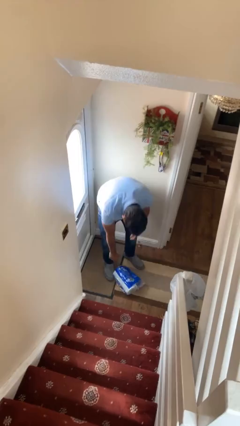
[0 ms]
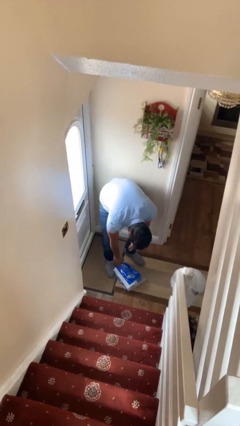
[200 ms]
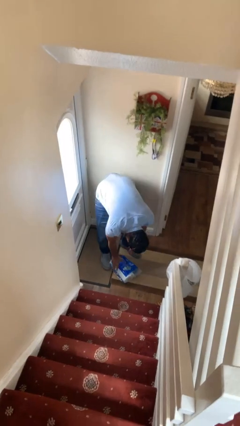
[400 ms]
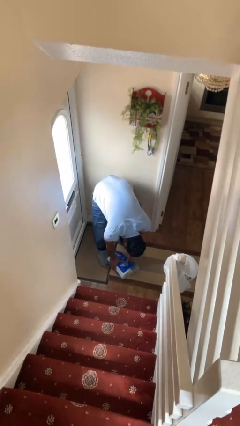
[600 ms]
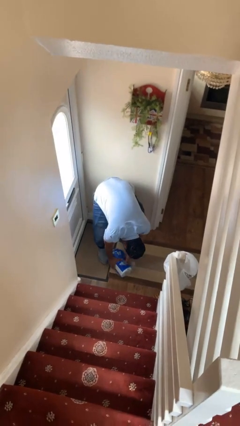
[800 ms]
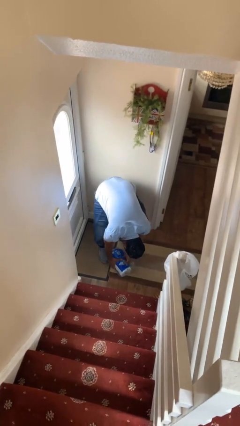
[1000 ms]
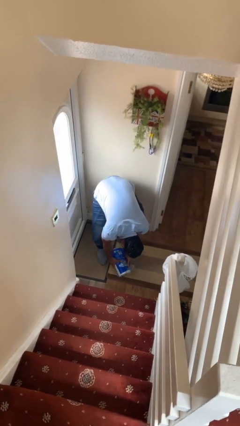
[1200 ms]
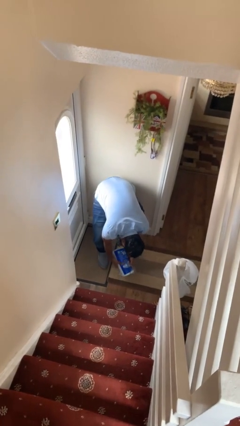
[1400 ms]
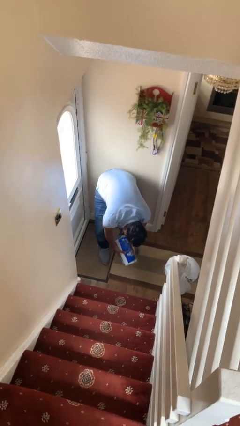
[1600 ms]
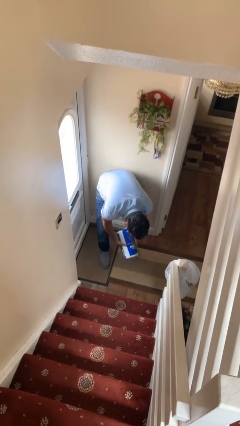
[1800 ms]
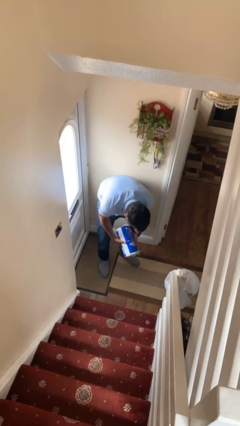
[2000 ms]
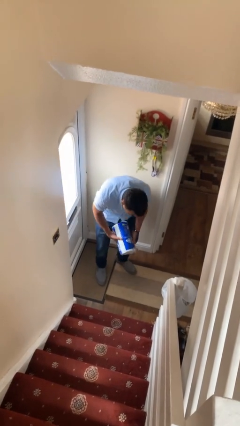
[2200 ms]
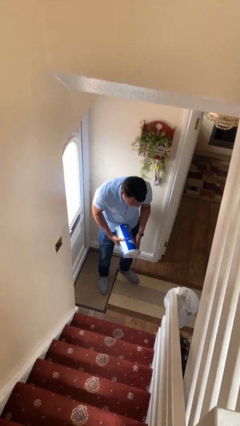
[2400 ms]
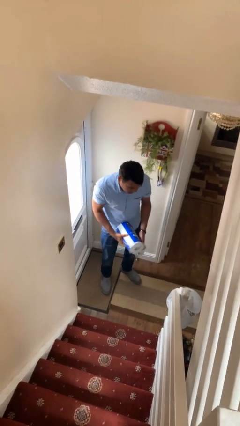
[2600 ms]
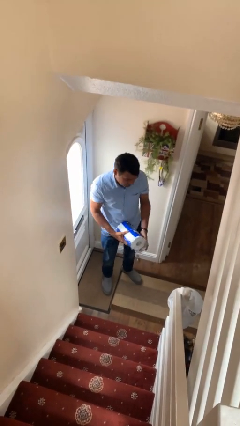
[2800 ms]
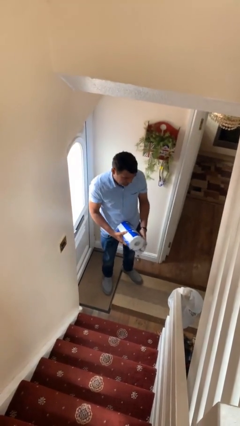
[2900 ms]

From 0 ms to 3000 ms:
person picks up object from floor

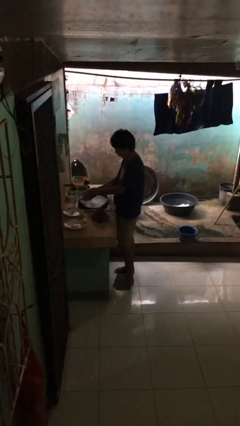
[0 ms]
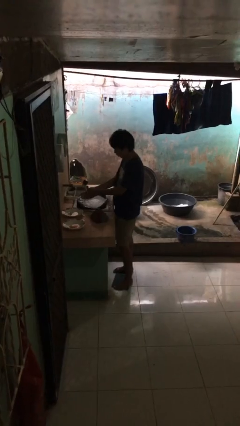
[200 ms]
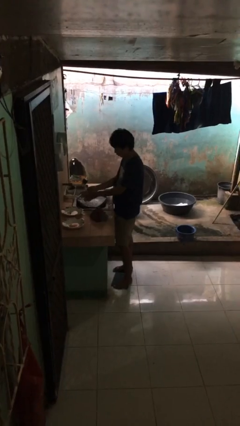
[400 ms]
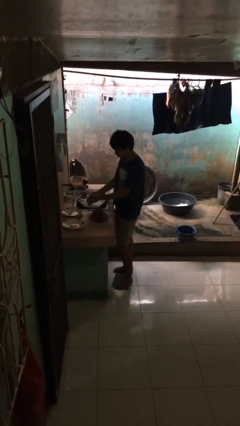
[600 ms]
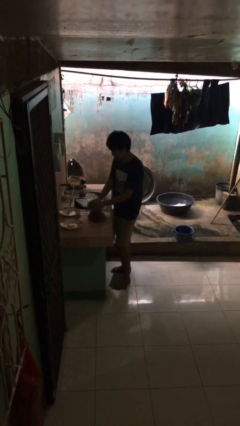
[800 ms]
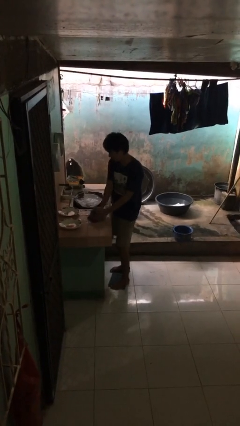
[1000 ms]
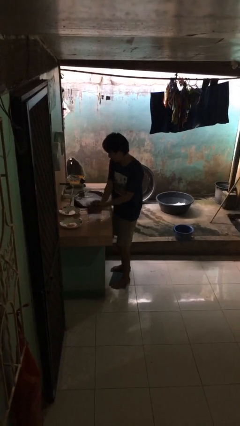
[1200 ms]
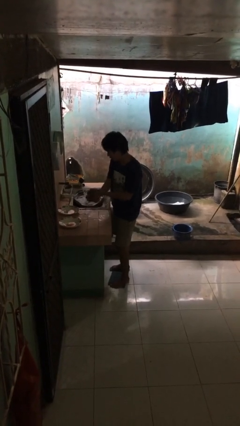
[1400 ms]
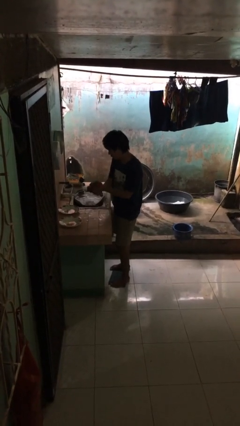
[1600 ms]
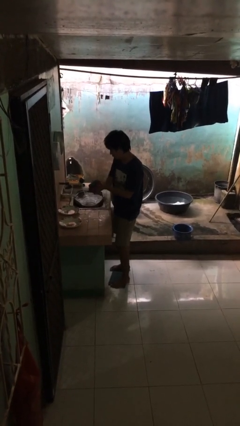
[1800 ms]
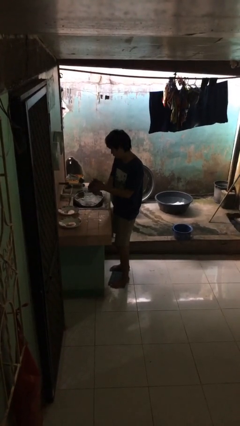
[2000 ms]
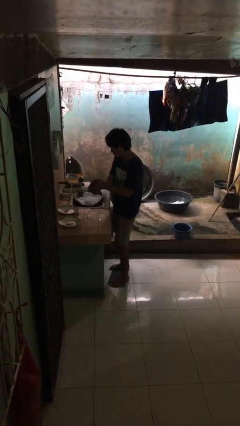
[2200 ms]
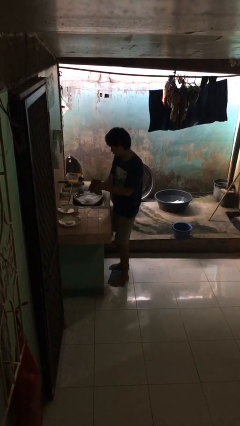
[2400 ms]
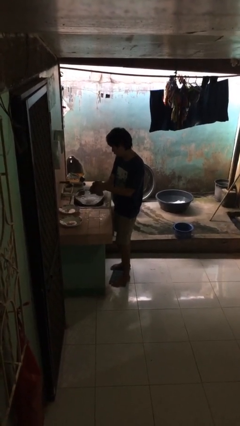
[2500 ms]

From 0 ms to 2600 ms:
person dries hands with towel

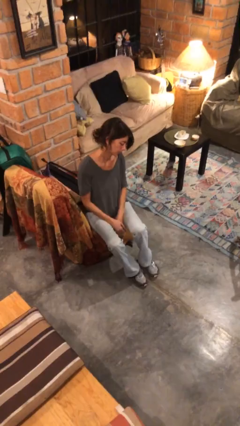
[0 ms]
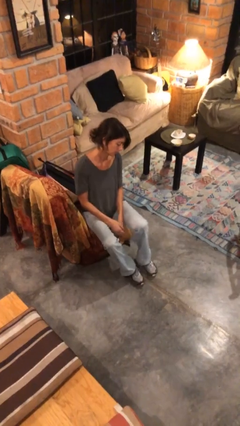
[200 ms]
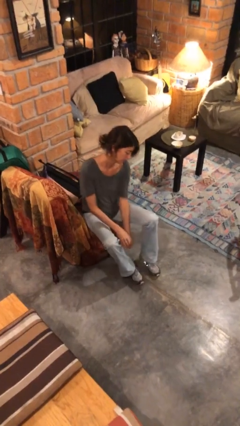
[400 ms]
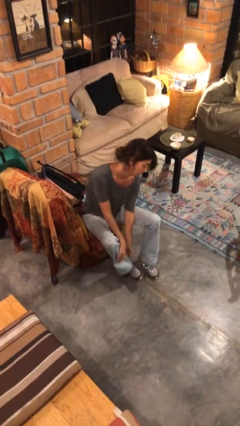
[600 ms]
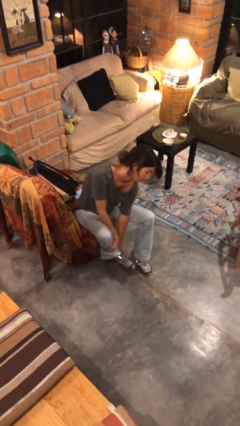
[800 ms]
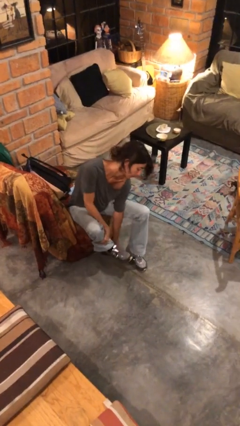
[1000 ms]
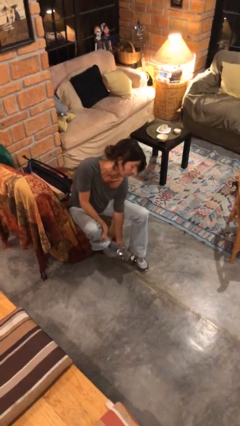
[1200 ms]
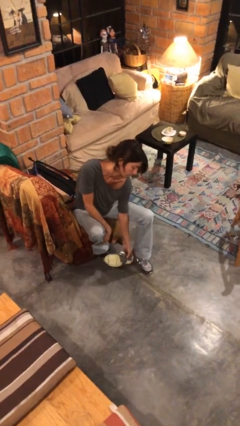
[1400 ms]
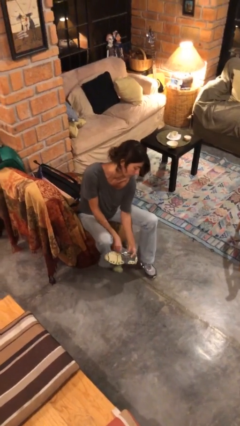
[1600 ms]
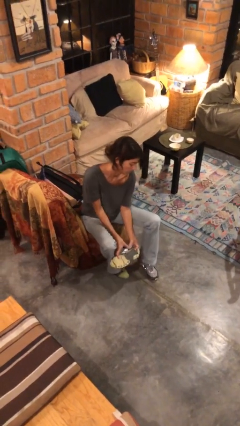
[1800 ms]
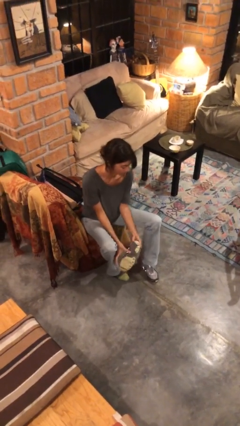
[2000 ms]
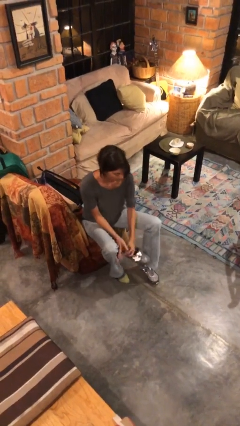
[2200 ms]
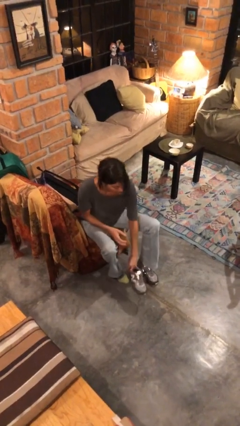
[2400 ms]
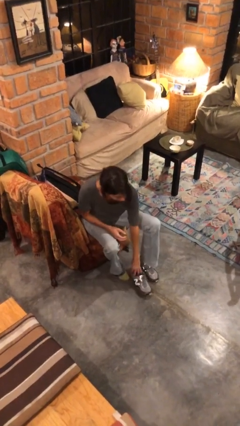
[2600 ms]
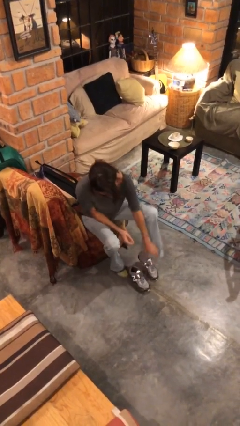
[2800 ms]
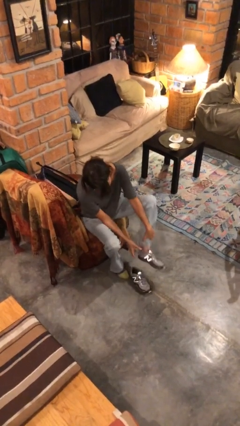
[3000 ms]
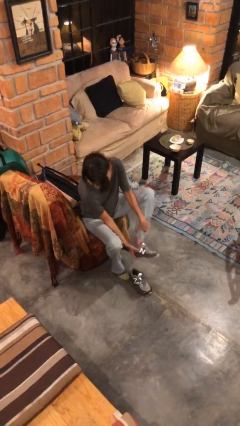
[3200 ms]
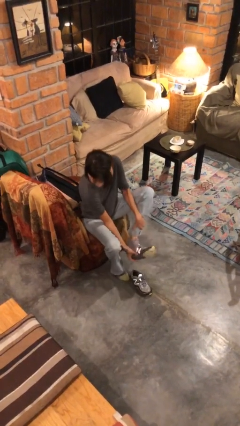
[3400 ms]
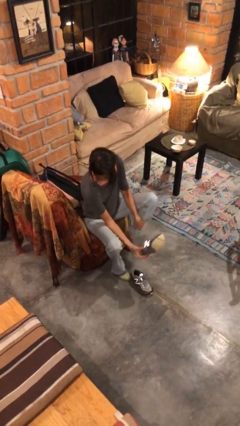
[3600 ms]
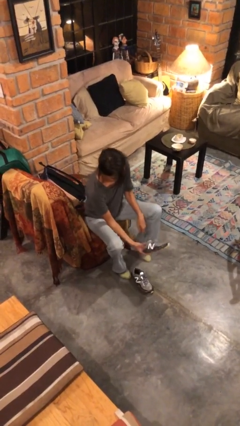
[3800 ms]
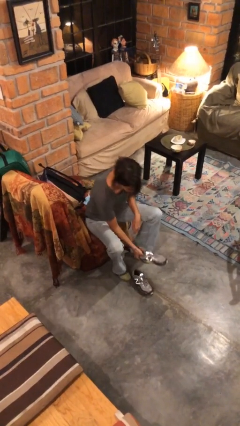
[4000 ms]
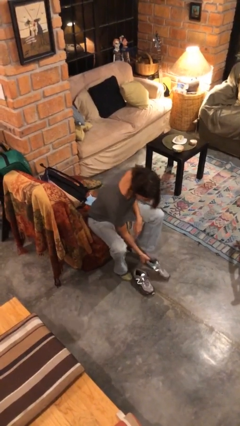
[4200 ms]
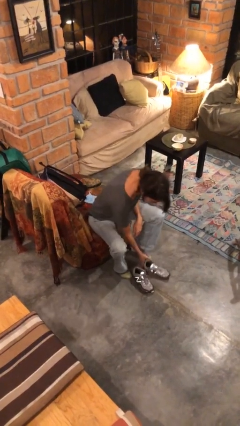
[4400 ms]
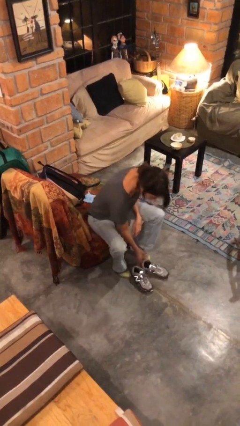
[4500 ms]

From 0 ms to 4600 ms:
person takes off shoes

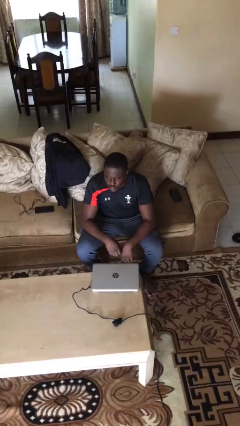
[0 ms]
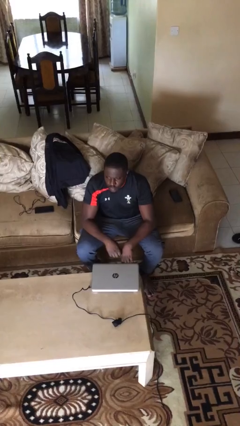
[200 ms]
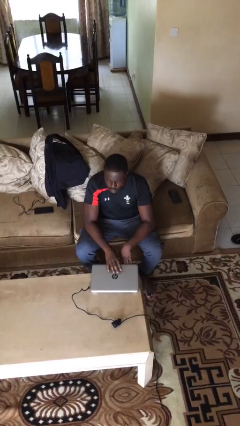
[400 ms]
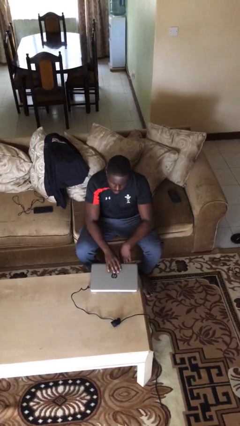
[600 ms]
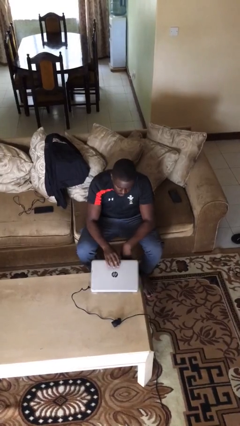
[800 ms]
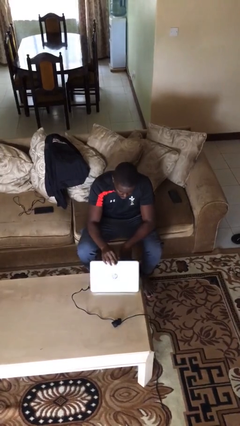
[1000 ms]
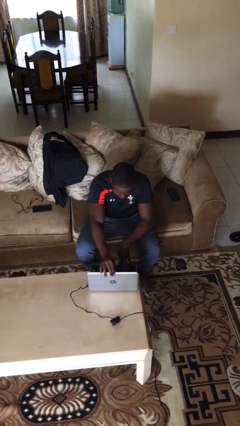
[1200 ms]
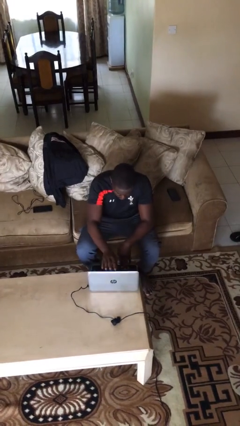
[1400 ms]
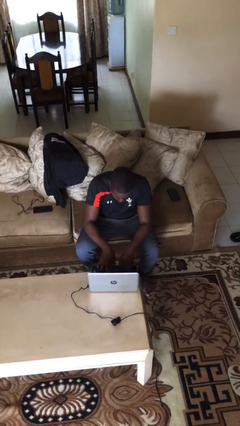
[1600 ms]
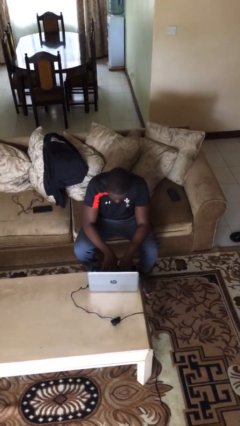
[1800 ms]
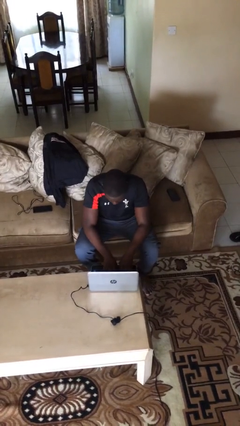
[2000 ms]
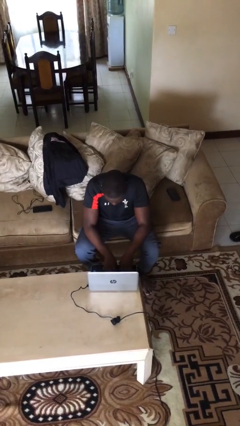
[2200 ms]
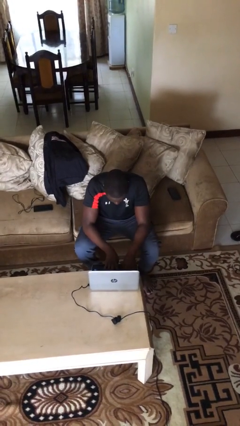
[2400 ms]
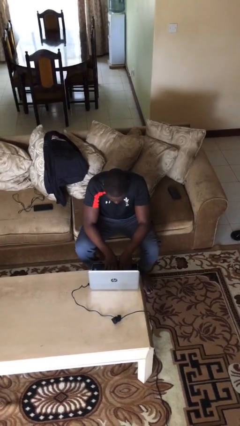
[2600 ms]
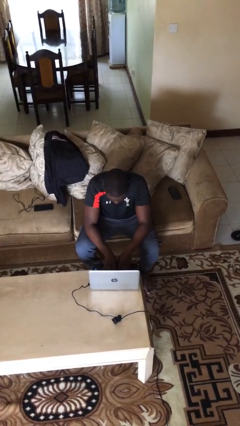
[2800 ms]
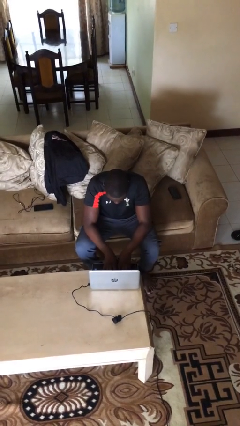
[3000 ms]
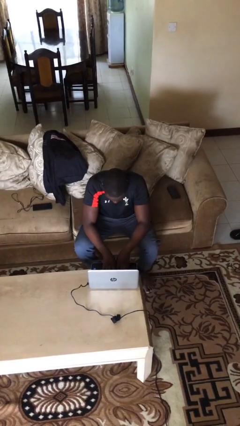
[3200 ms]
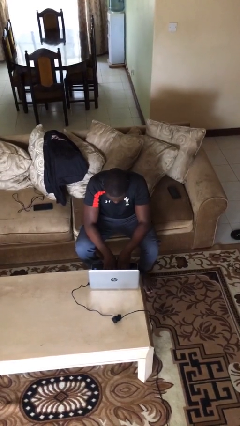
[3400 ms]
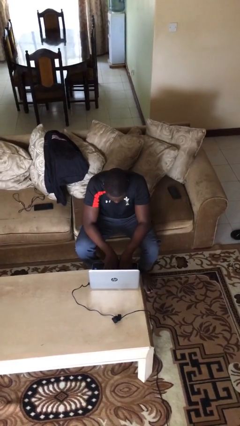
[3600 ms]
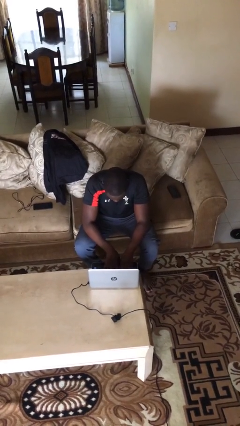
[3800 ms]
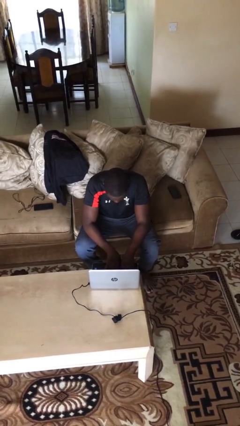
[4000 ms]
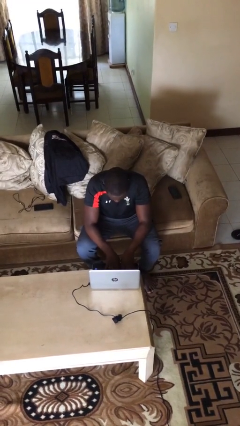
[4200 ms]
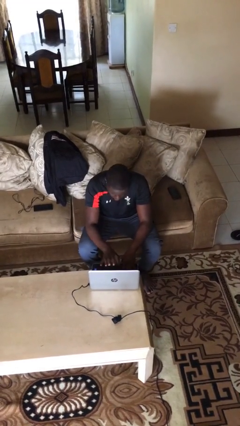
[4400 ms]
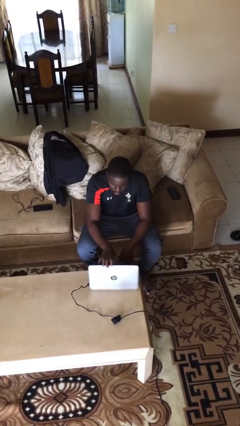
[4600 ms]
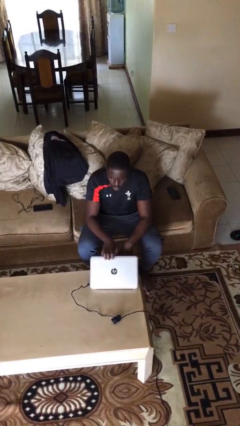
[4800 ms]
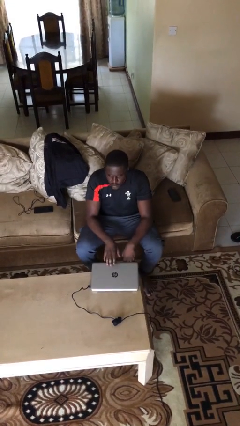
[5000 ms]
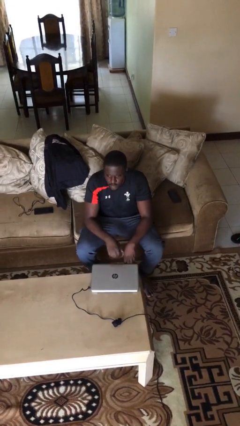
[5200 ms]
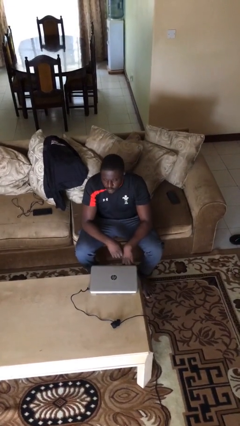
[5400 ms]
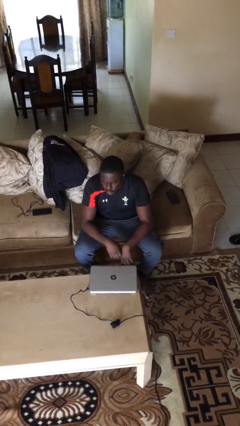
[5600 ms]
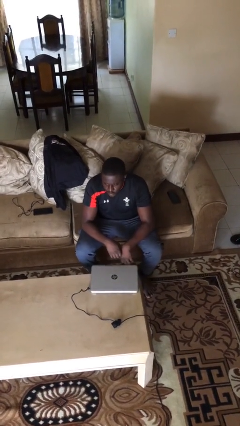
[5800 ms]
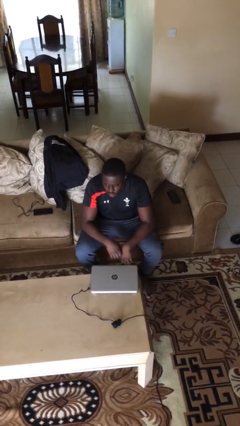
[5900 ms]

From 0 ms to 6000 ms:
person interacts with laptop

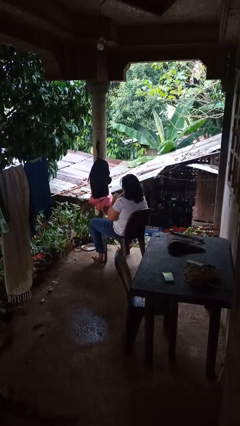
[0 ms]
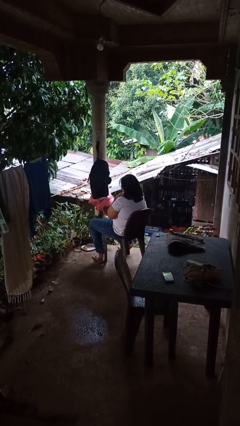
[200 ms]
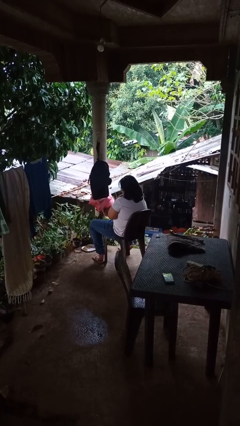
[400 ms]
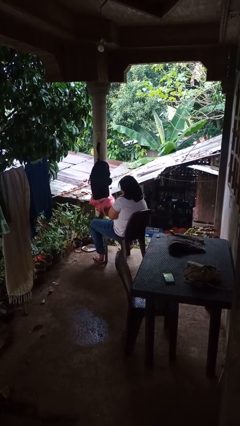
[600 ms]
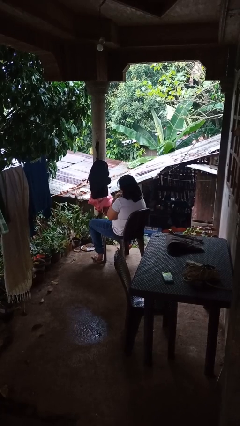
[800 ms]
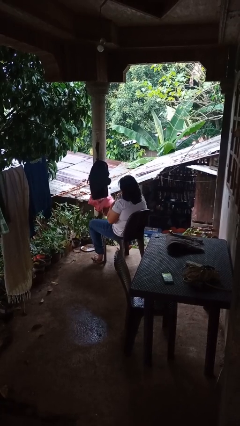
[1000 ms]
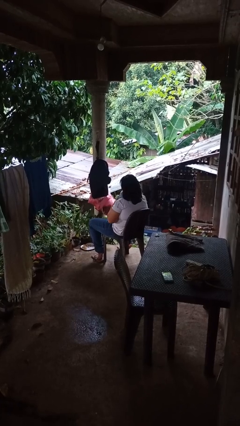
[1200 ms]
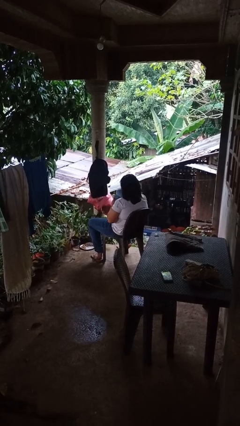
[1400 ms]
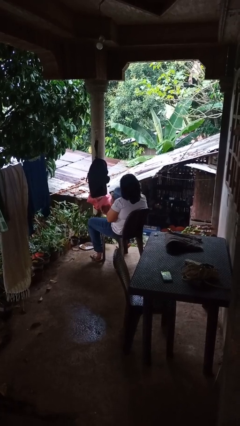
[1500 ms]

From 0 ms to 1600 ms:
person hugs stuffed animal

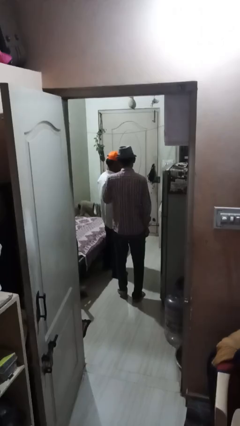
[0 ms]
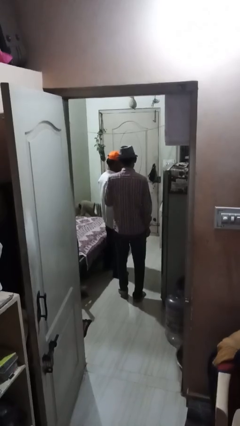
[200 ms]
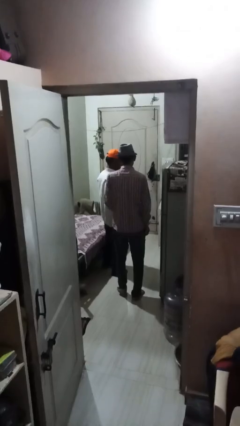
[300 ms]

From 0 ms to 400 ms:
person pounds shoulders of person
